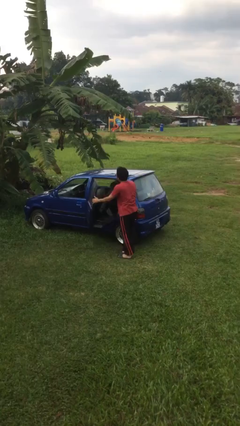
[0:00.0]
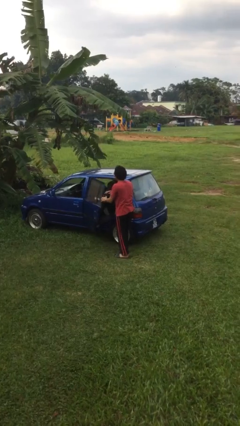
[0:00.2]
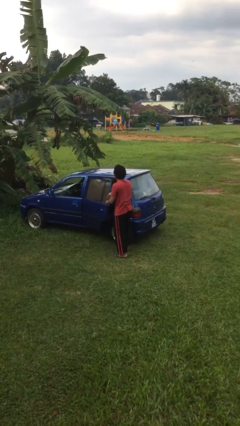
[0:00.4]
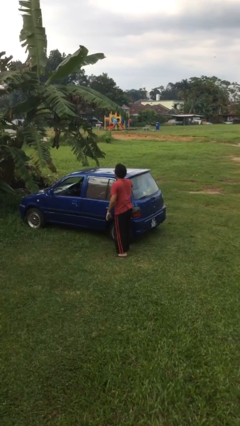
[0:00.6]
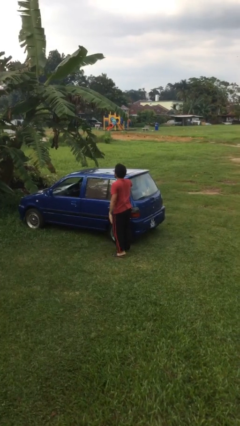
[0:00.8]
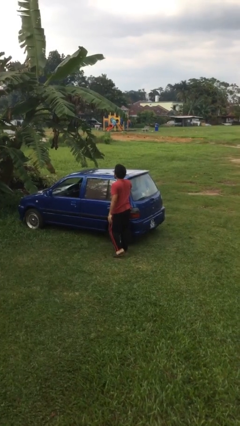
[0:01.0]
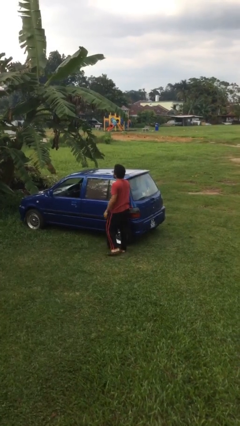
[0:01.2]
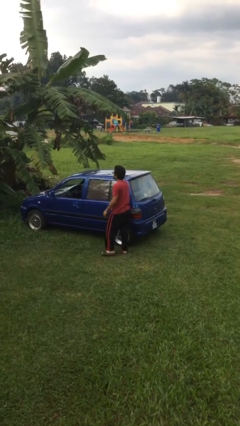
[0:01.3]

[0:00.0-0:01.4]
person closes car door

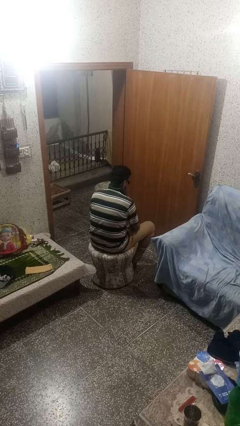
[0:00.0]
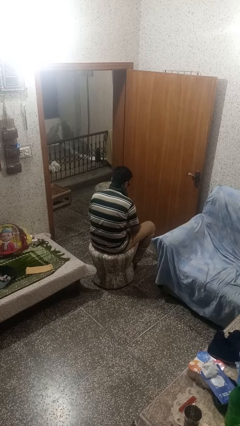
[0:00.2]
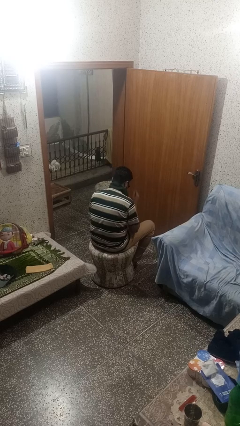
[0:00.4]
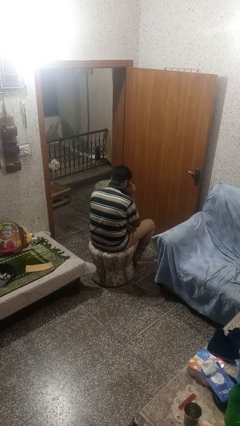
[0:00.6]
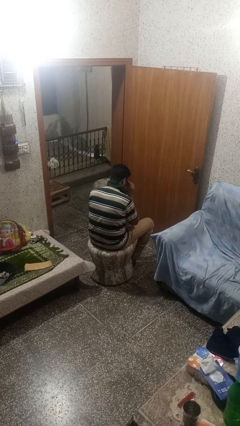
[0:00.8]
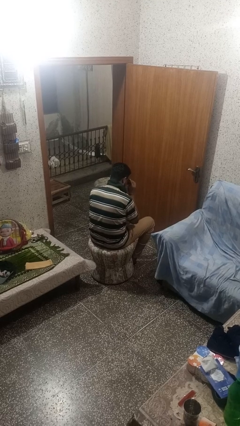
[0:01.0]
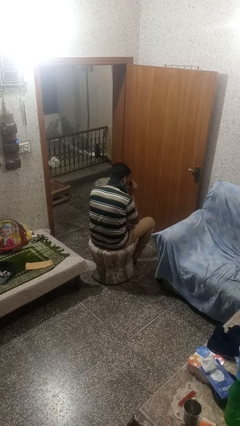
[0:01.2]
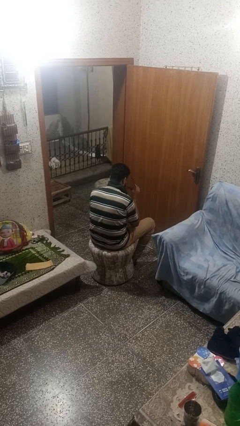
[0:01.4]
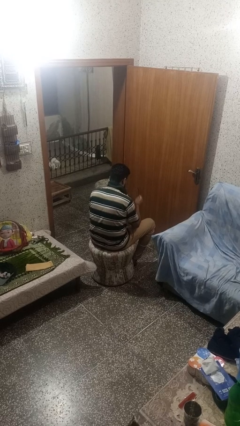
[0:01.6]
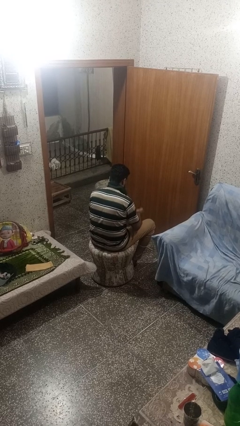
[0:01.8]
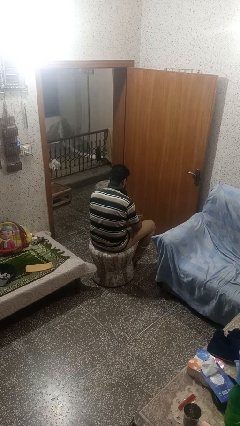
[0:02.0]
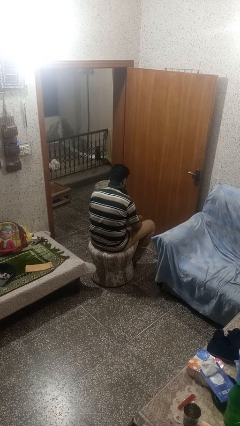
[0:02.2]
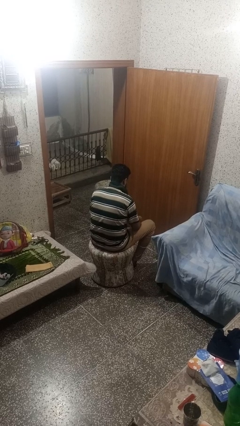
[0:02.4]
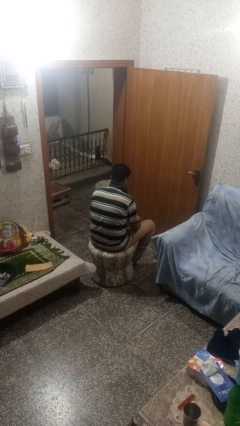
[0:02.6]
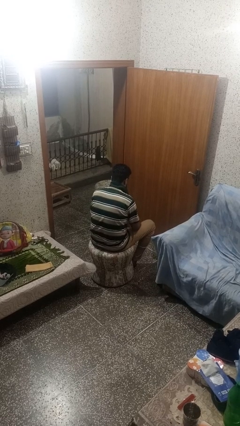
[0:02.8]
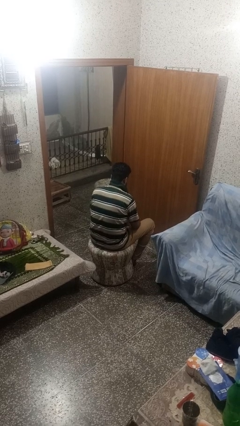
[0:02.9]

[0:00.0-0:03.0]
person takes off glasses

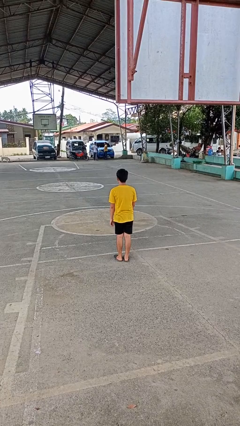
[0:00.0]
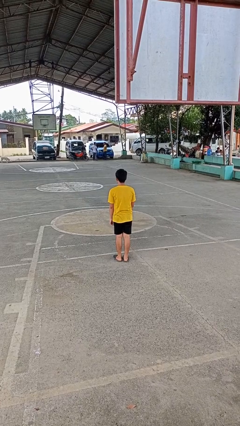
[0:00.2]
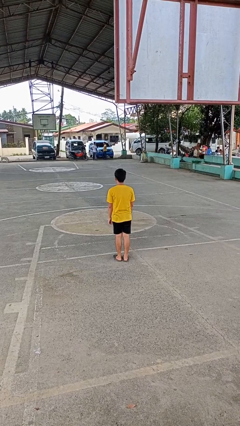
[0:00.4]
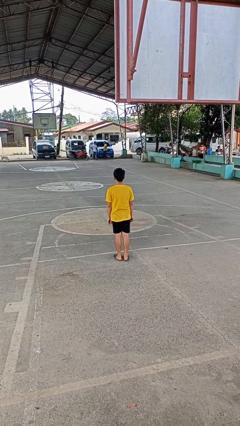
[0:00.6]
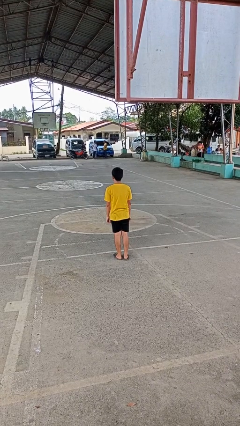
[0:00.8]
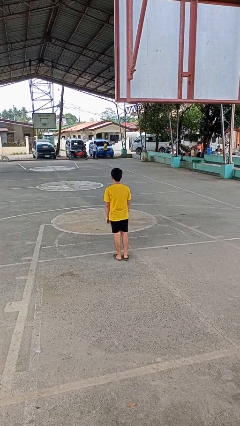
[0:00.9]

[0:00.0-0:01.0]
person stands up from floor

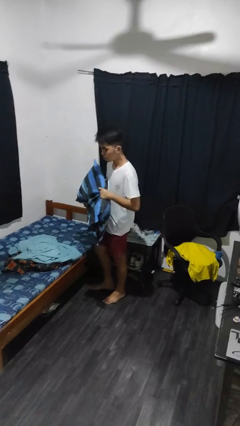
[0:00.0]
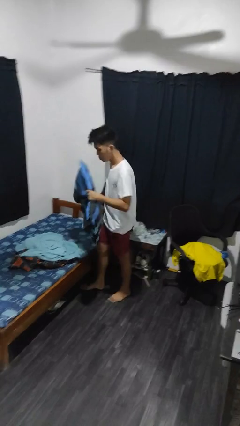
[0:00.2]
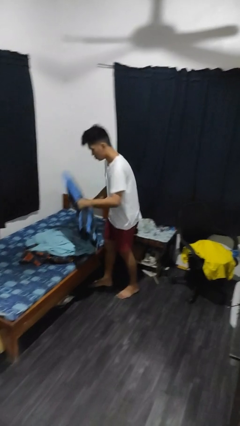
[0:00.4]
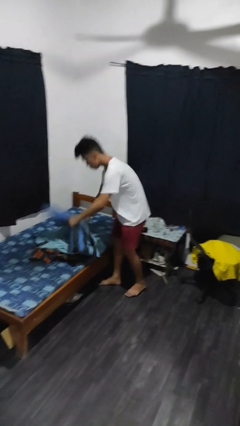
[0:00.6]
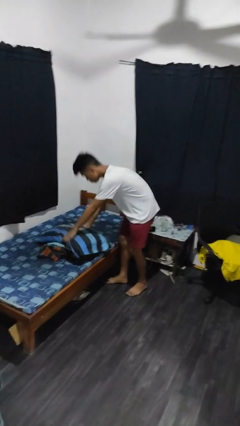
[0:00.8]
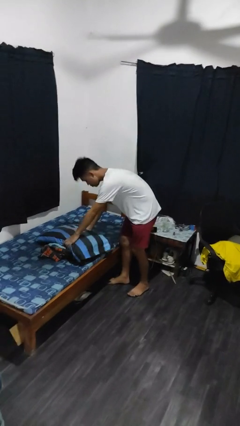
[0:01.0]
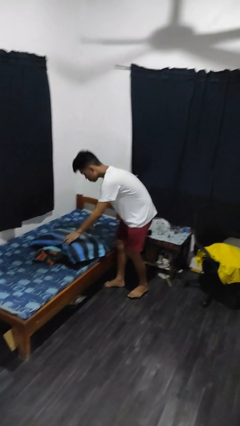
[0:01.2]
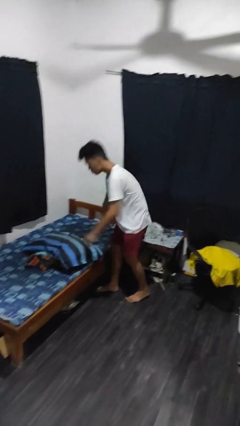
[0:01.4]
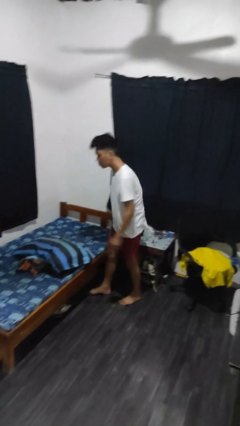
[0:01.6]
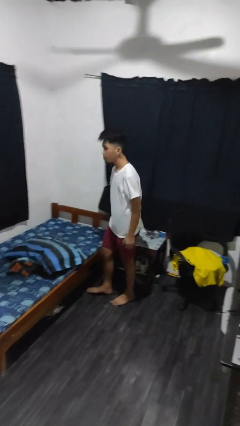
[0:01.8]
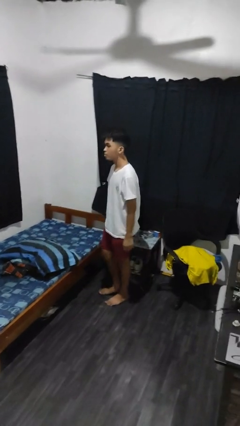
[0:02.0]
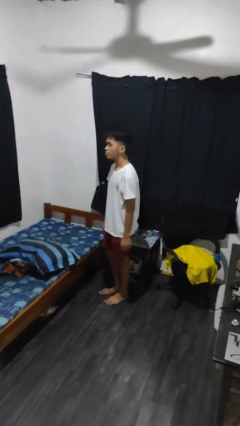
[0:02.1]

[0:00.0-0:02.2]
person puts down object on bed

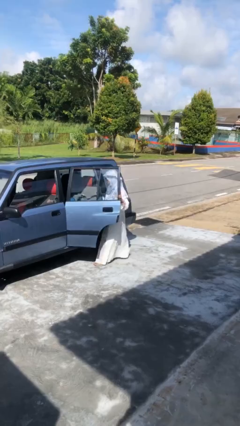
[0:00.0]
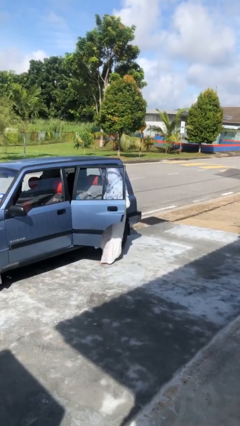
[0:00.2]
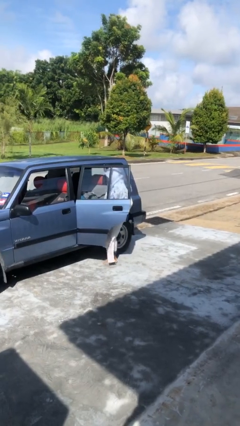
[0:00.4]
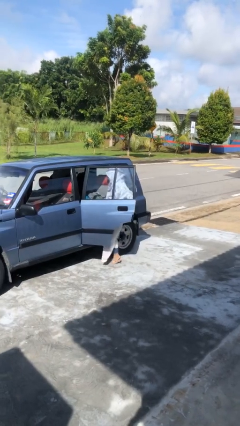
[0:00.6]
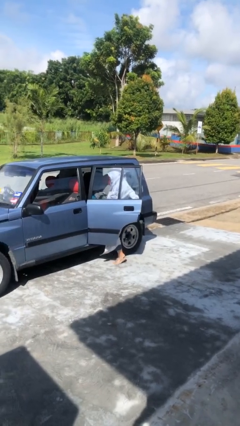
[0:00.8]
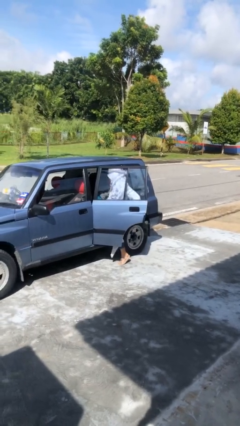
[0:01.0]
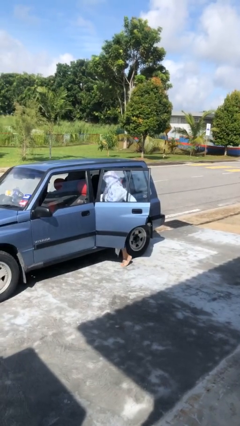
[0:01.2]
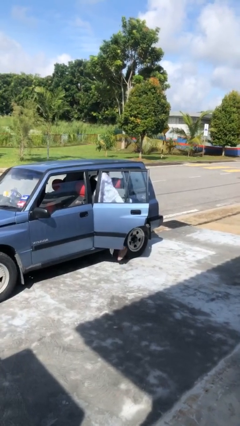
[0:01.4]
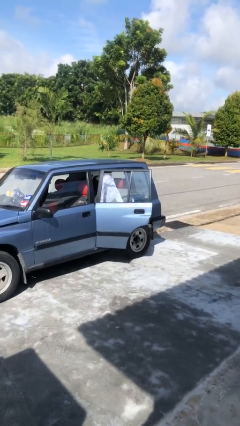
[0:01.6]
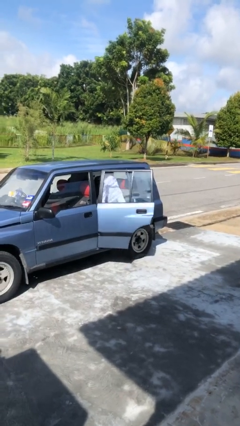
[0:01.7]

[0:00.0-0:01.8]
person enters car

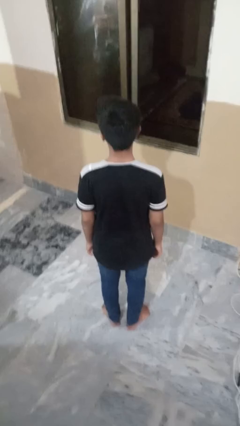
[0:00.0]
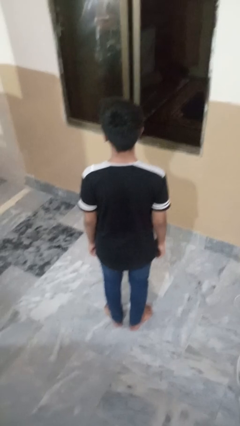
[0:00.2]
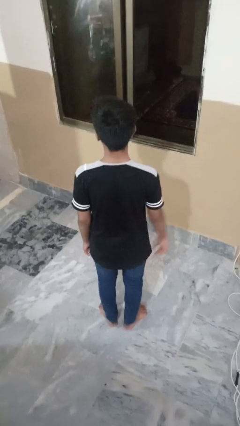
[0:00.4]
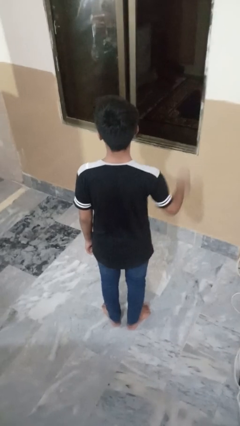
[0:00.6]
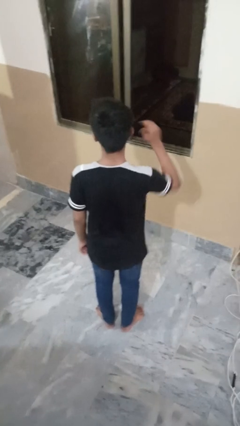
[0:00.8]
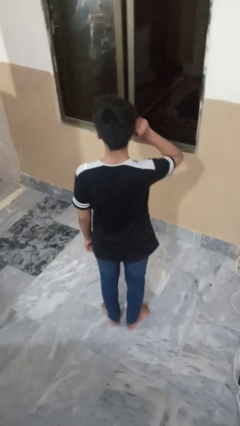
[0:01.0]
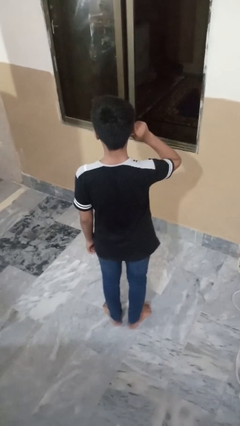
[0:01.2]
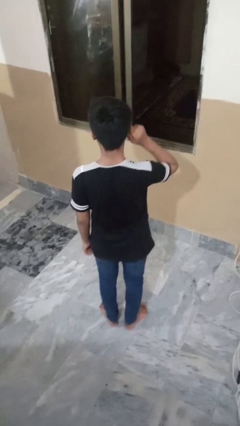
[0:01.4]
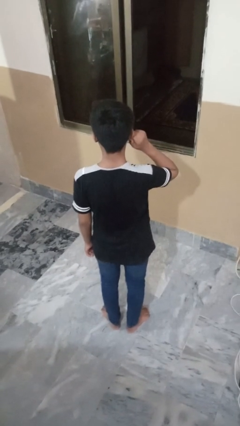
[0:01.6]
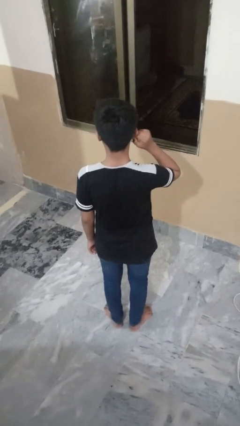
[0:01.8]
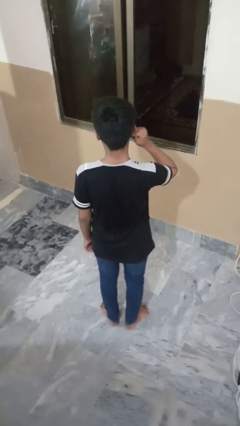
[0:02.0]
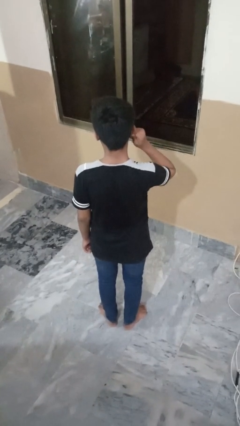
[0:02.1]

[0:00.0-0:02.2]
person touches earlobe

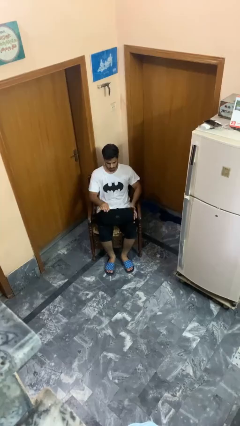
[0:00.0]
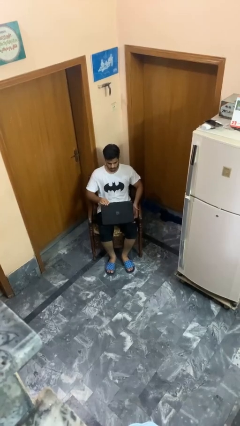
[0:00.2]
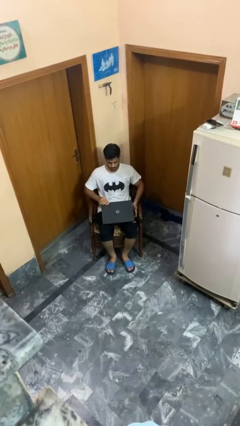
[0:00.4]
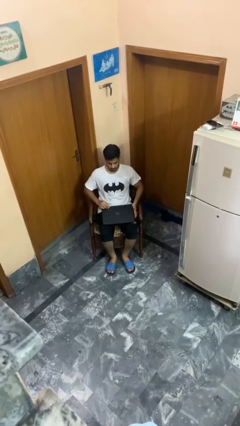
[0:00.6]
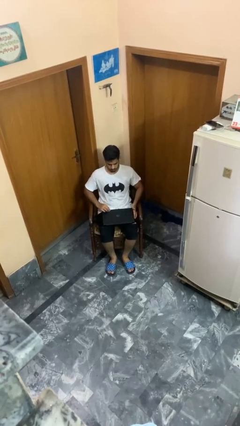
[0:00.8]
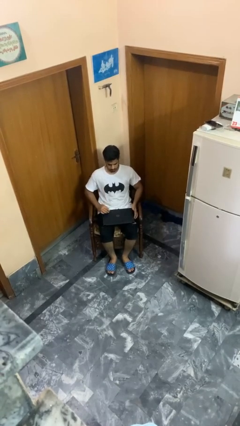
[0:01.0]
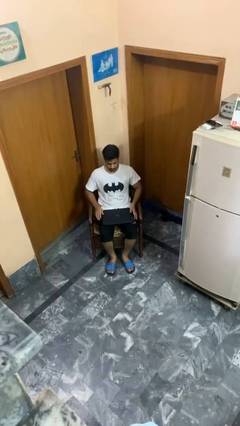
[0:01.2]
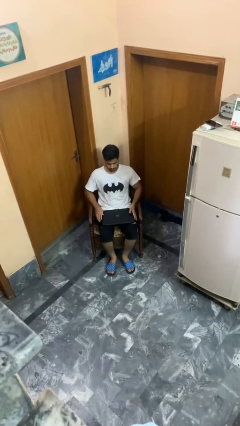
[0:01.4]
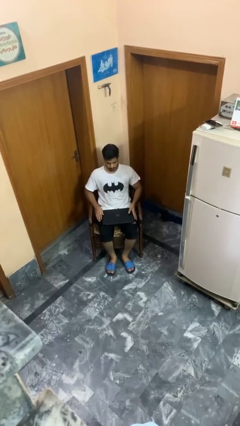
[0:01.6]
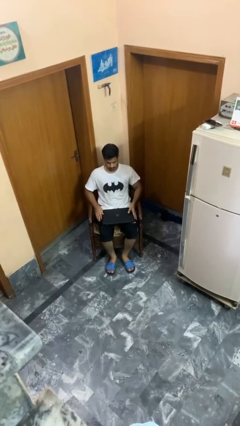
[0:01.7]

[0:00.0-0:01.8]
person closes laptop

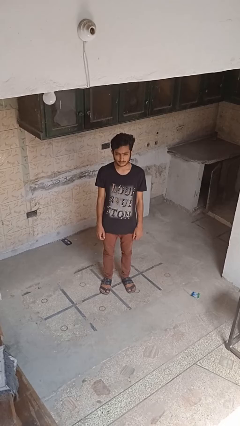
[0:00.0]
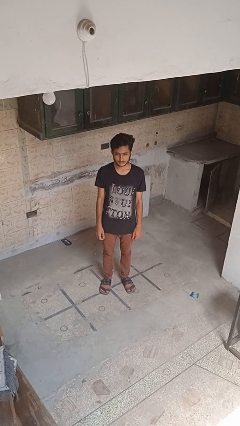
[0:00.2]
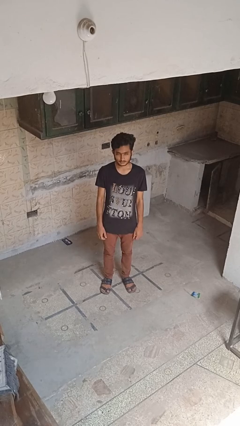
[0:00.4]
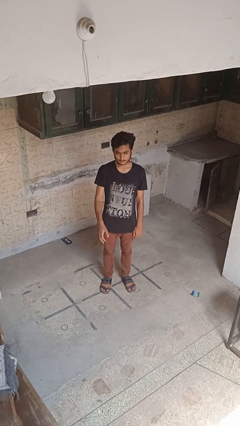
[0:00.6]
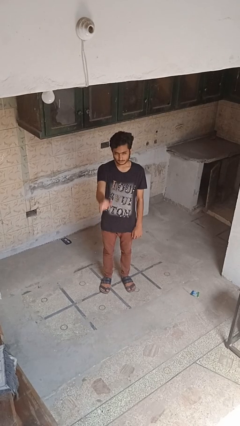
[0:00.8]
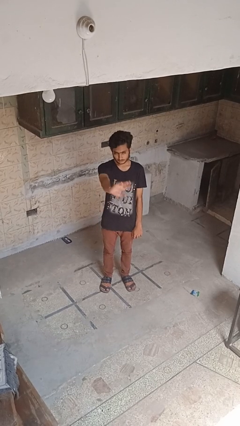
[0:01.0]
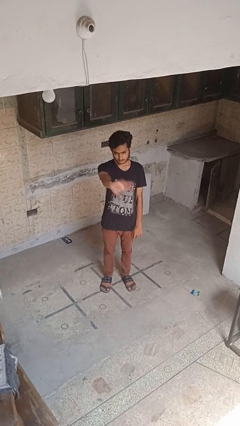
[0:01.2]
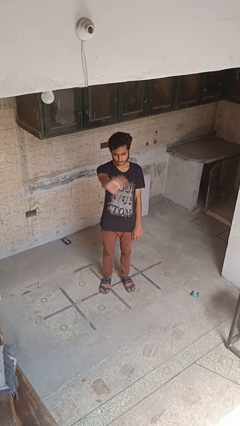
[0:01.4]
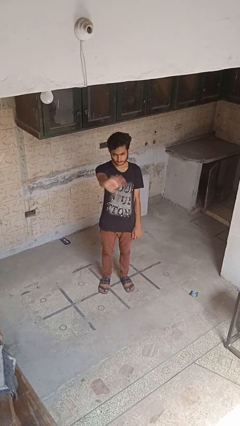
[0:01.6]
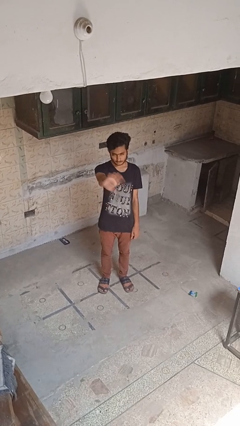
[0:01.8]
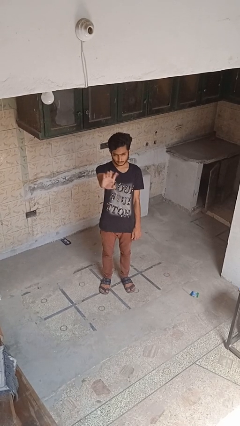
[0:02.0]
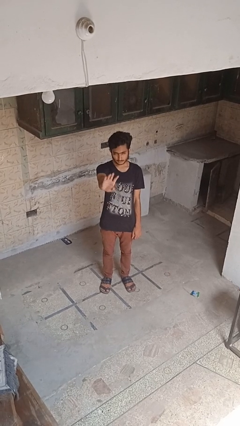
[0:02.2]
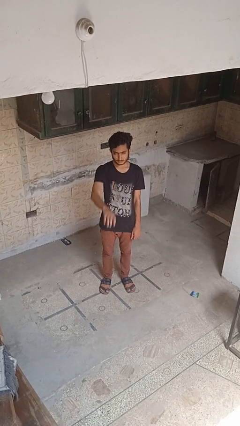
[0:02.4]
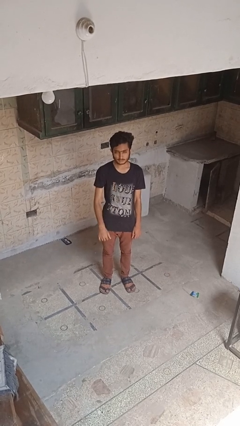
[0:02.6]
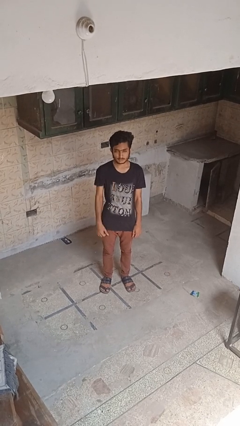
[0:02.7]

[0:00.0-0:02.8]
person waves at person

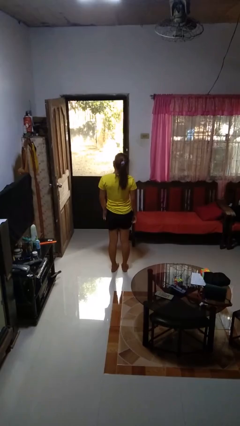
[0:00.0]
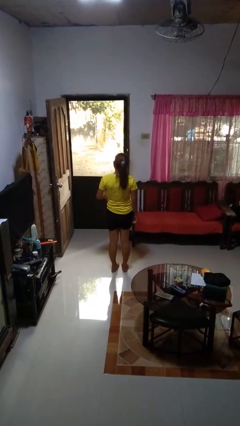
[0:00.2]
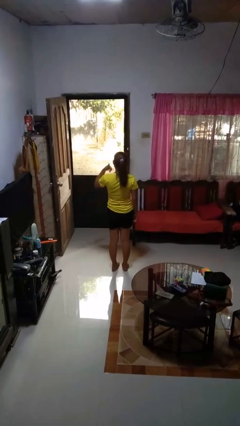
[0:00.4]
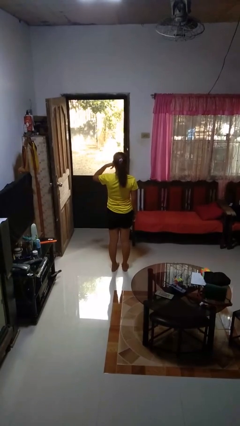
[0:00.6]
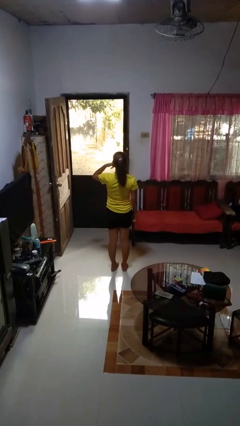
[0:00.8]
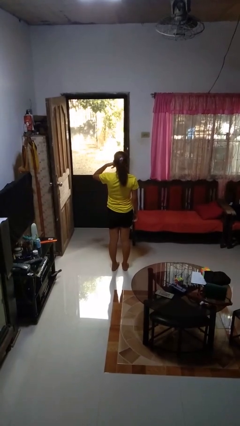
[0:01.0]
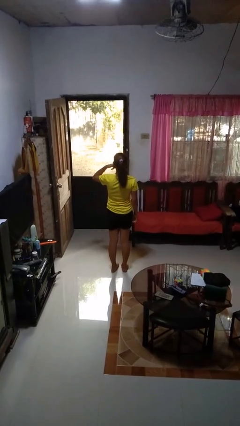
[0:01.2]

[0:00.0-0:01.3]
person gestures call me
